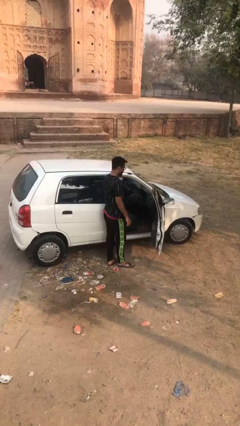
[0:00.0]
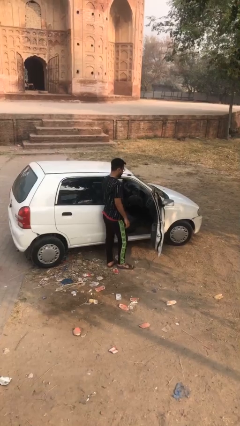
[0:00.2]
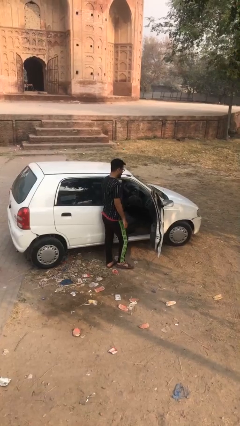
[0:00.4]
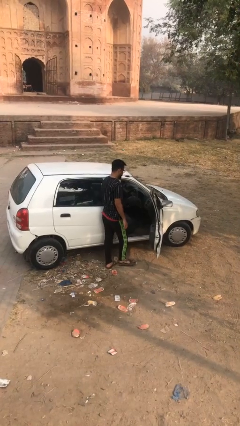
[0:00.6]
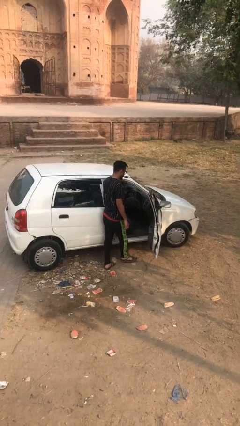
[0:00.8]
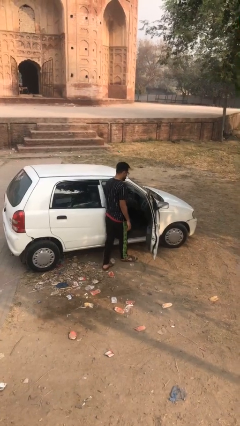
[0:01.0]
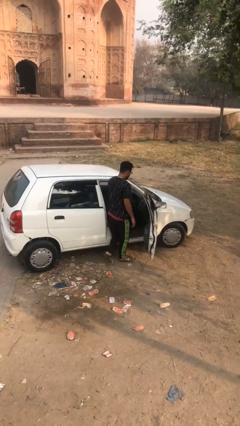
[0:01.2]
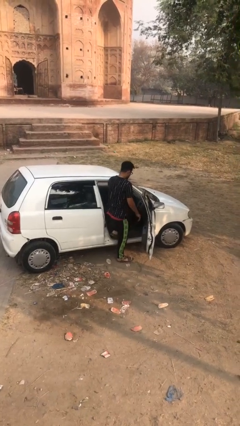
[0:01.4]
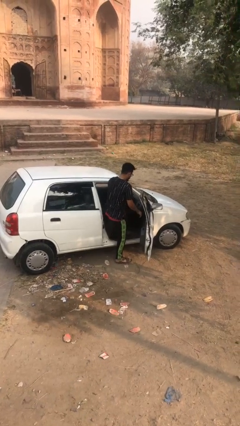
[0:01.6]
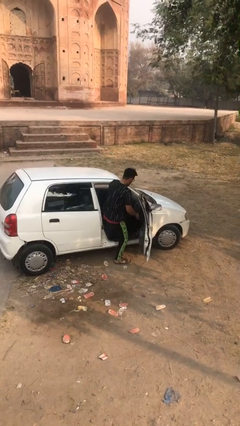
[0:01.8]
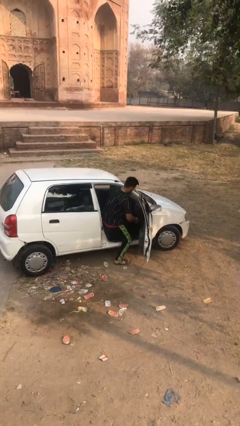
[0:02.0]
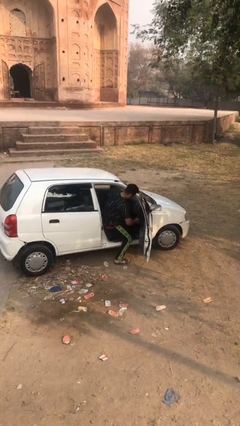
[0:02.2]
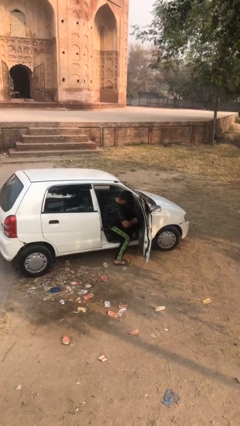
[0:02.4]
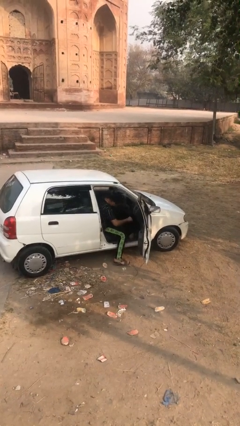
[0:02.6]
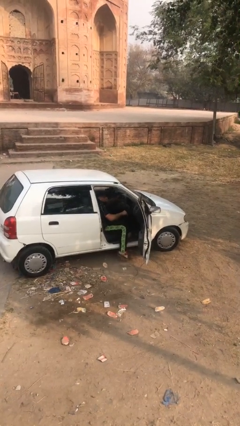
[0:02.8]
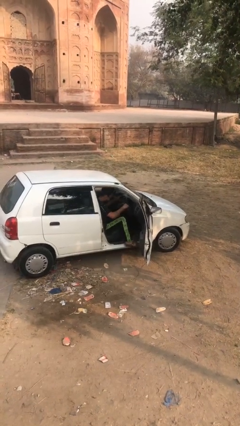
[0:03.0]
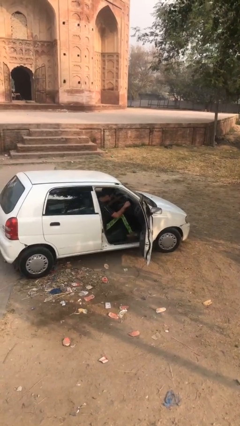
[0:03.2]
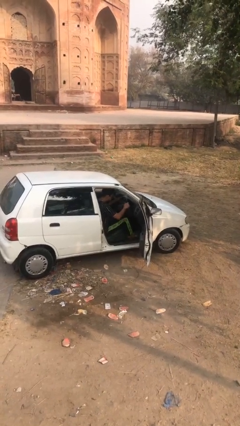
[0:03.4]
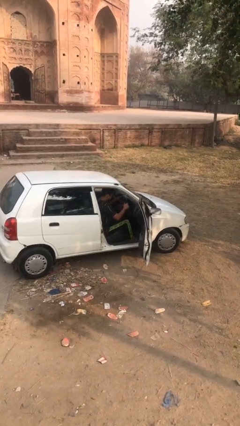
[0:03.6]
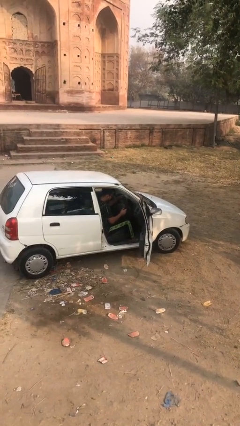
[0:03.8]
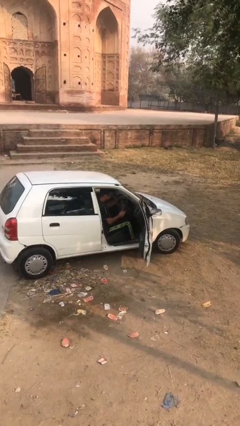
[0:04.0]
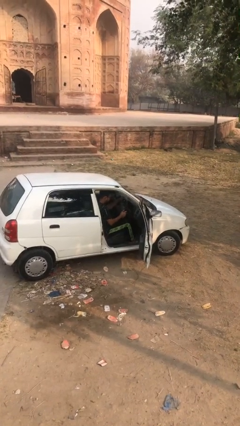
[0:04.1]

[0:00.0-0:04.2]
person enters car

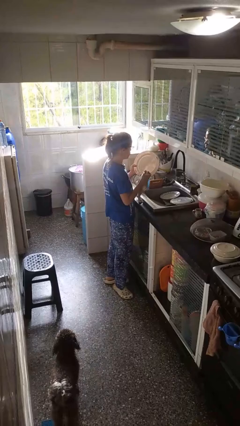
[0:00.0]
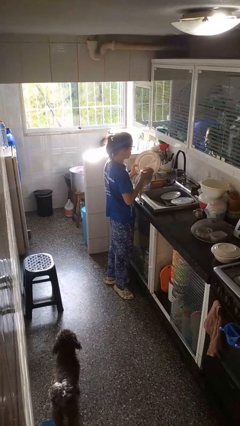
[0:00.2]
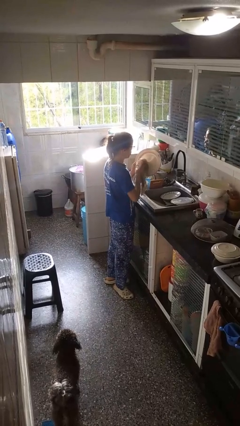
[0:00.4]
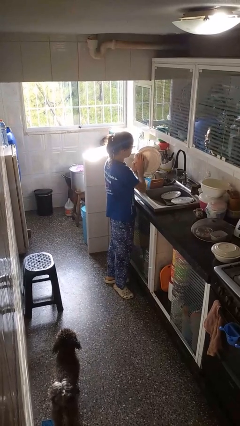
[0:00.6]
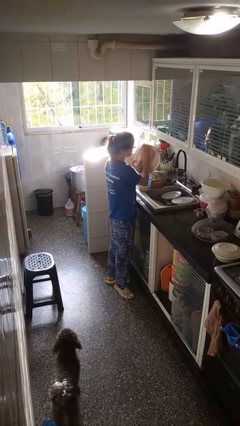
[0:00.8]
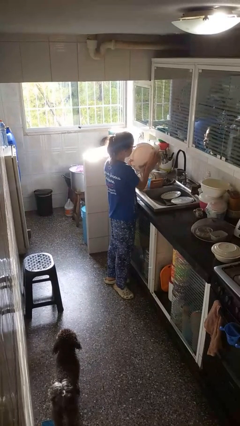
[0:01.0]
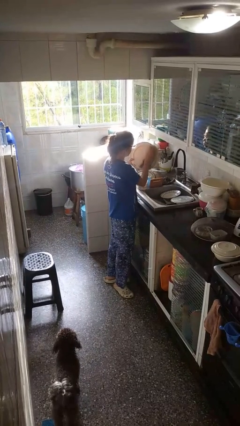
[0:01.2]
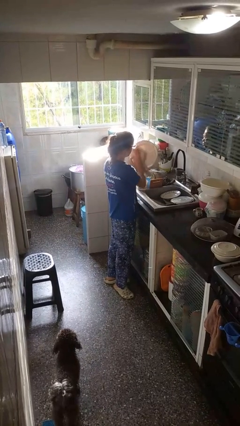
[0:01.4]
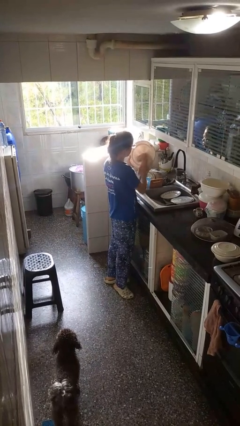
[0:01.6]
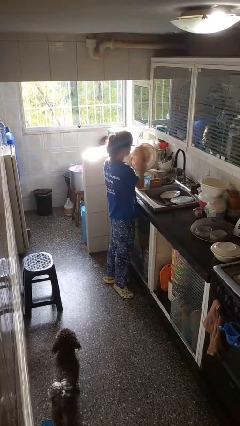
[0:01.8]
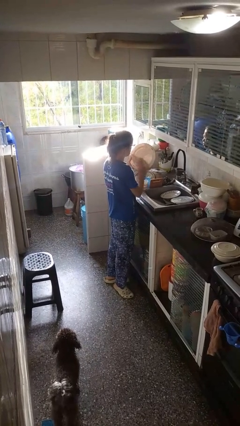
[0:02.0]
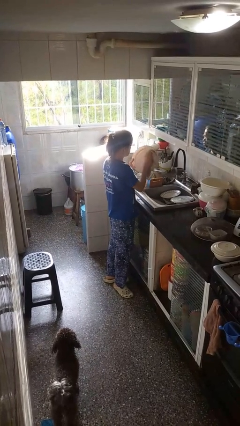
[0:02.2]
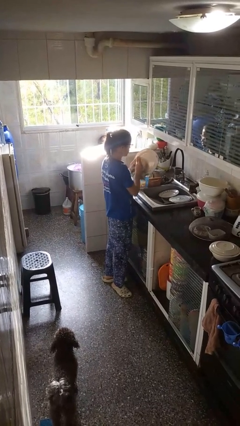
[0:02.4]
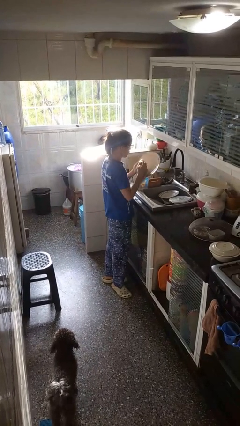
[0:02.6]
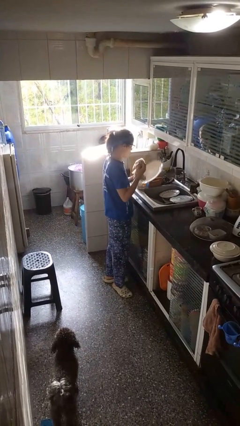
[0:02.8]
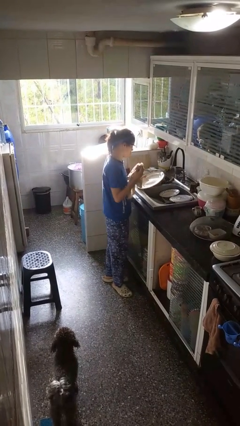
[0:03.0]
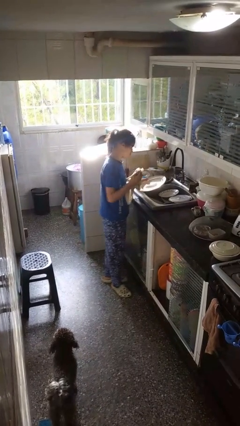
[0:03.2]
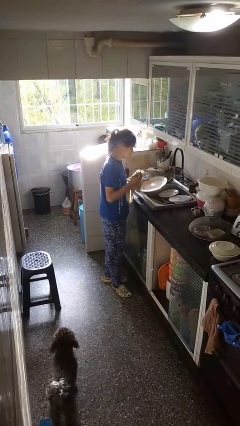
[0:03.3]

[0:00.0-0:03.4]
person dries dish

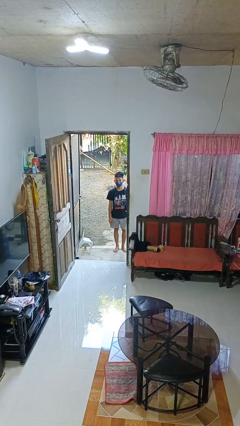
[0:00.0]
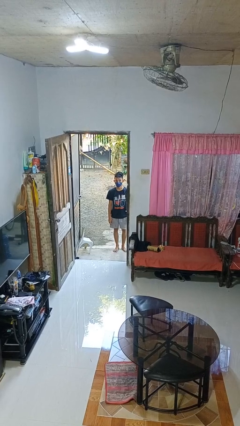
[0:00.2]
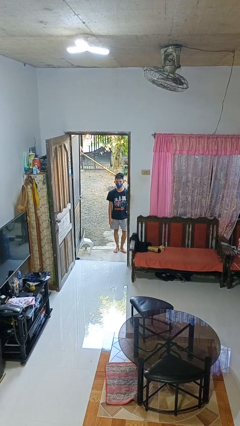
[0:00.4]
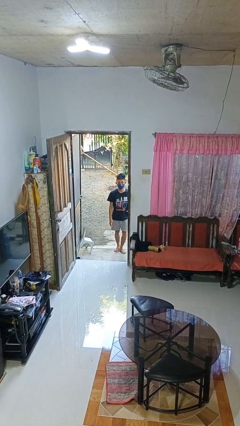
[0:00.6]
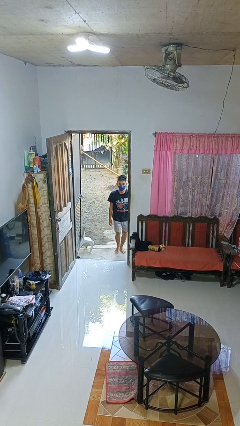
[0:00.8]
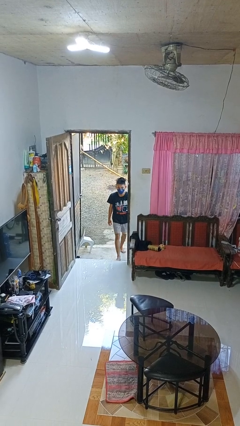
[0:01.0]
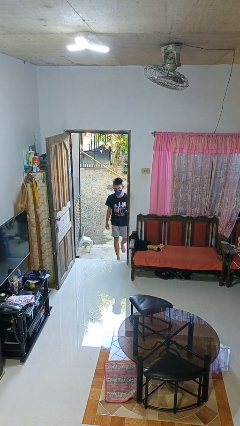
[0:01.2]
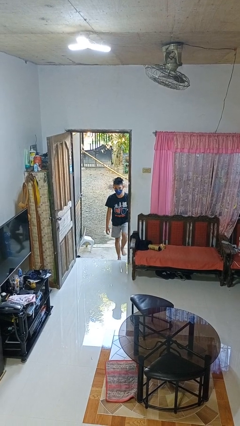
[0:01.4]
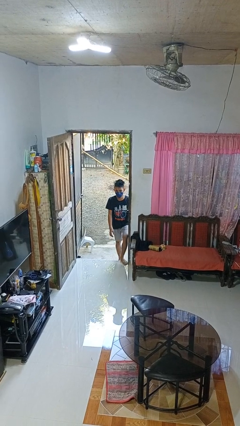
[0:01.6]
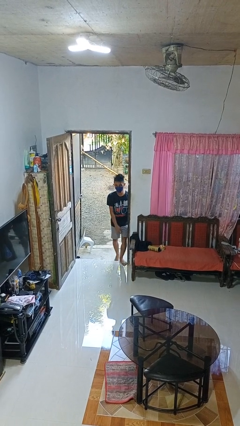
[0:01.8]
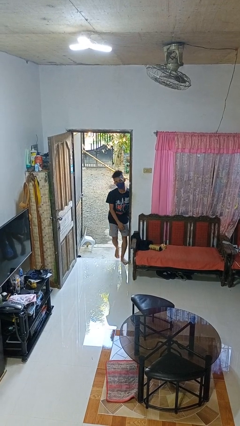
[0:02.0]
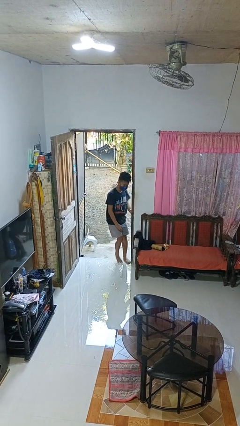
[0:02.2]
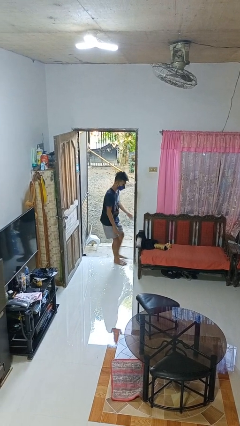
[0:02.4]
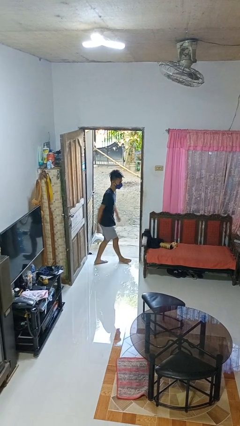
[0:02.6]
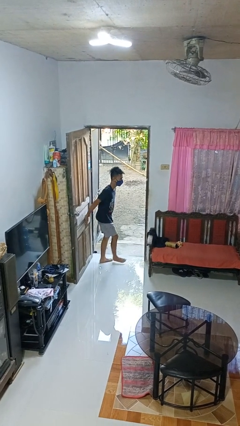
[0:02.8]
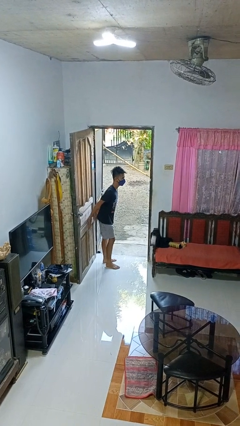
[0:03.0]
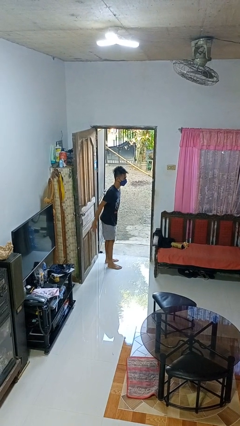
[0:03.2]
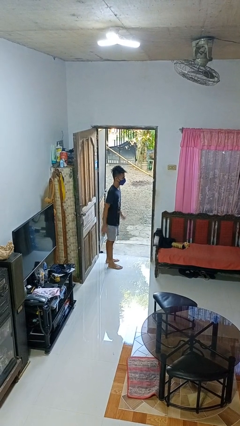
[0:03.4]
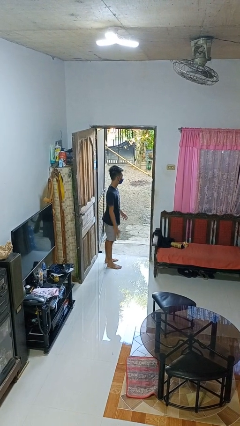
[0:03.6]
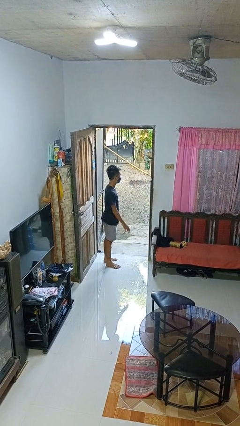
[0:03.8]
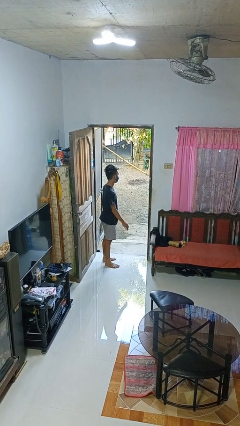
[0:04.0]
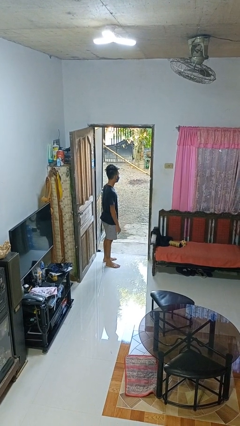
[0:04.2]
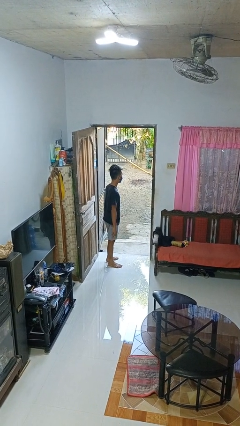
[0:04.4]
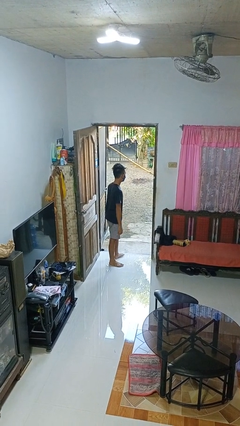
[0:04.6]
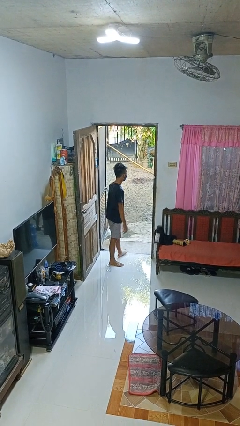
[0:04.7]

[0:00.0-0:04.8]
person bumps into wall

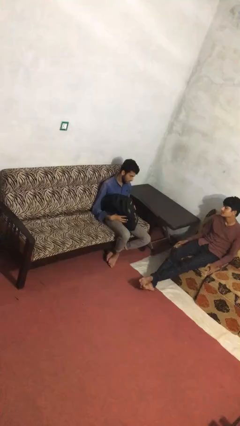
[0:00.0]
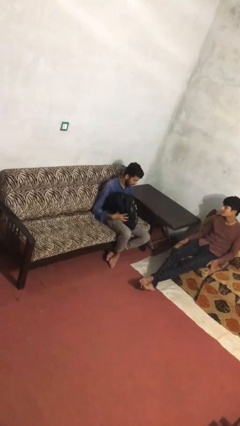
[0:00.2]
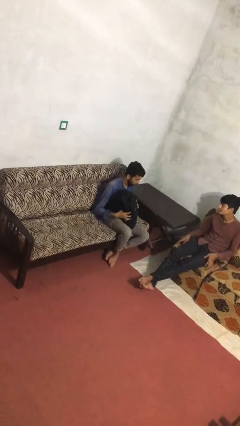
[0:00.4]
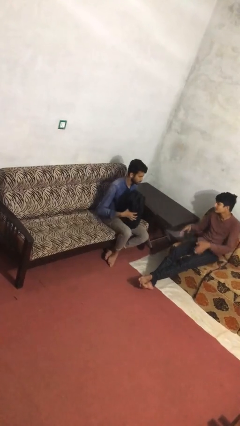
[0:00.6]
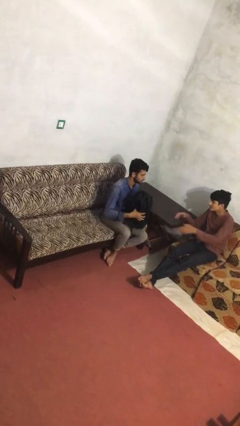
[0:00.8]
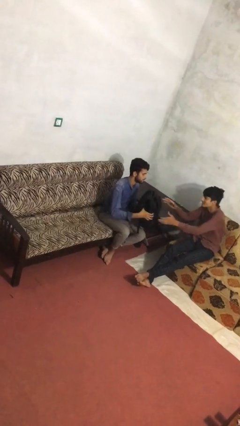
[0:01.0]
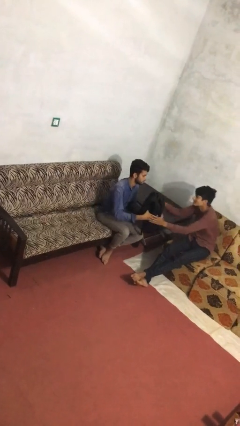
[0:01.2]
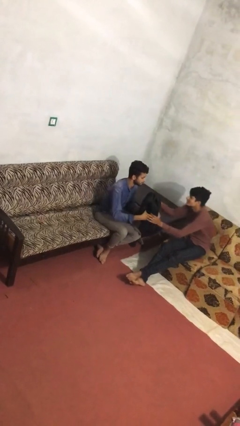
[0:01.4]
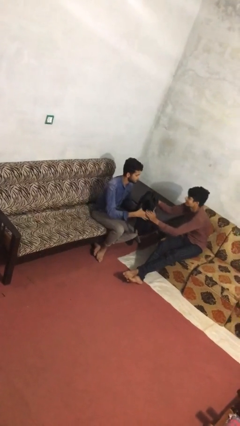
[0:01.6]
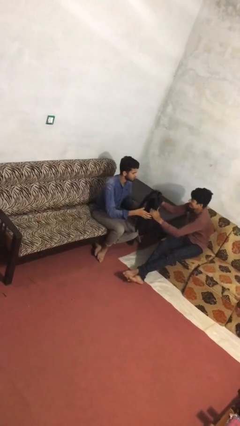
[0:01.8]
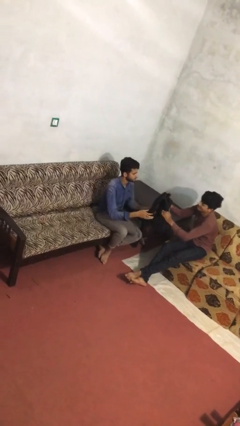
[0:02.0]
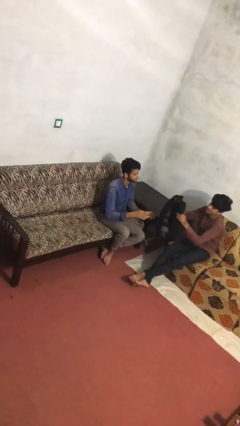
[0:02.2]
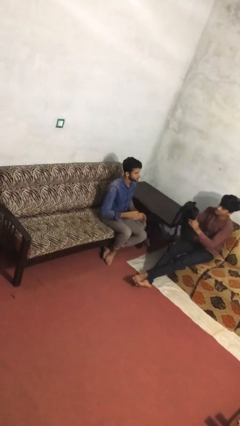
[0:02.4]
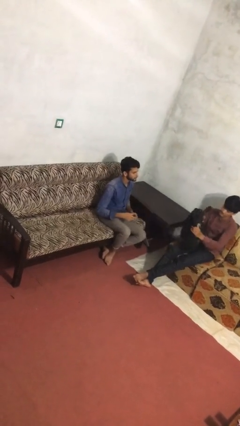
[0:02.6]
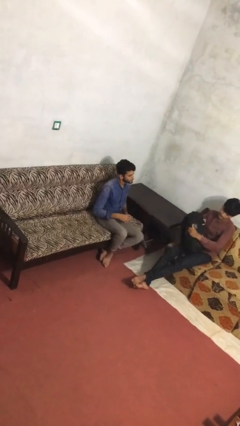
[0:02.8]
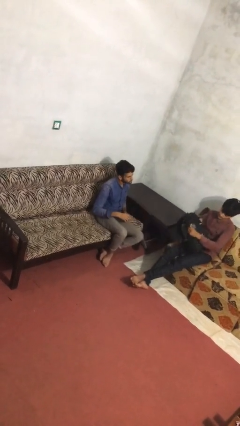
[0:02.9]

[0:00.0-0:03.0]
person transfers object to person

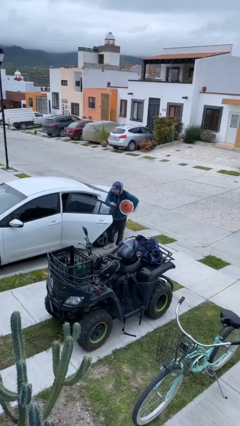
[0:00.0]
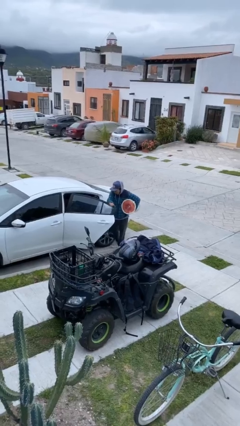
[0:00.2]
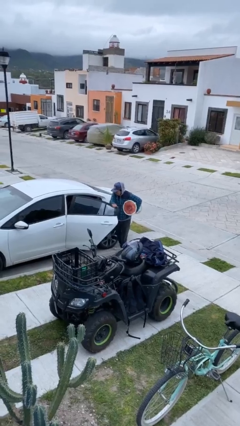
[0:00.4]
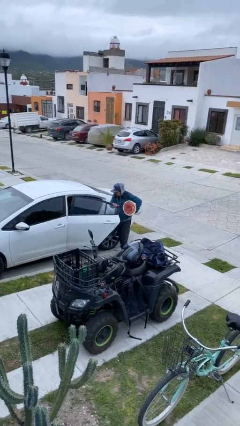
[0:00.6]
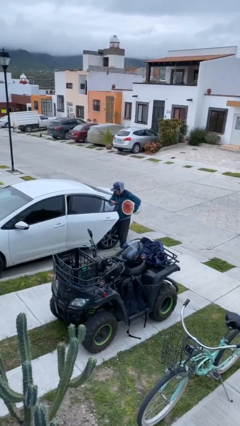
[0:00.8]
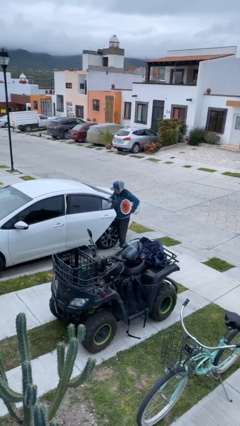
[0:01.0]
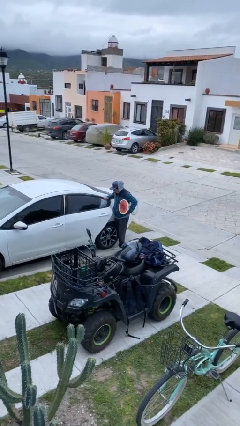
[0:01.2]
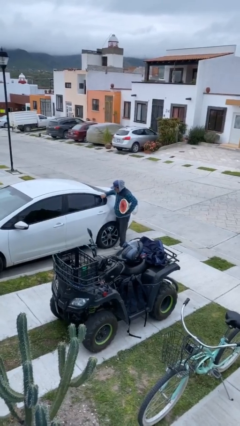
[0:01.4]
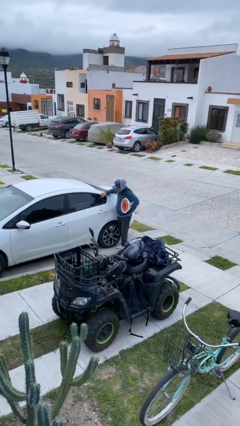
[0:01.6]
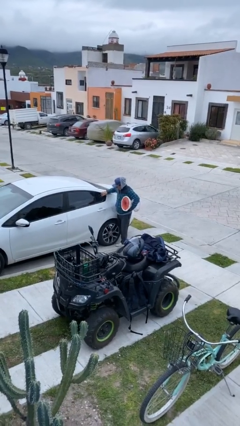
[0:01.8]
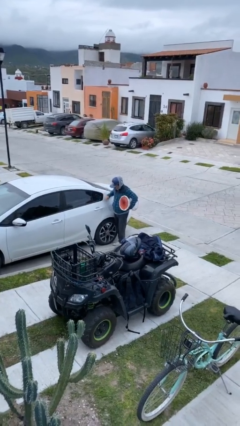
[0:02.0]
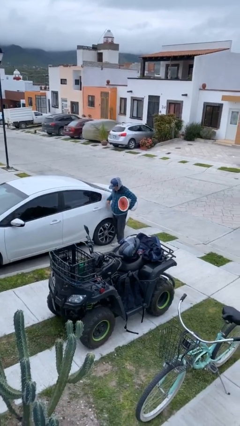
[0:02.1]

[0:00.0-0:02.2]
person closes car door

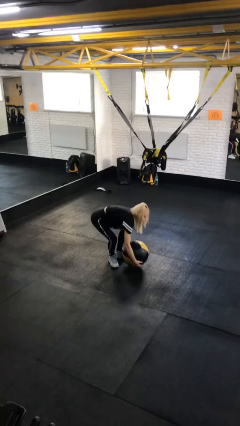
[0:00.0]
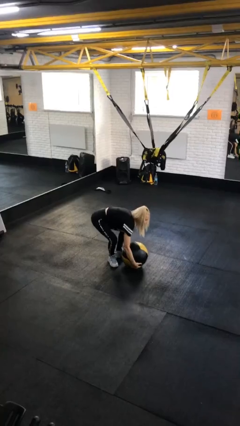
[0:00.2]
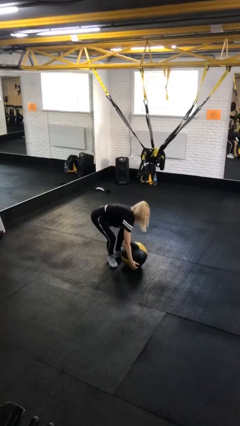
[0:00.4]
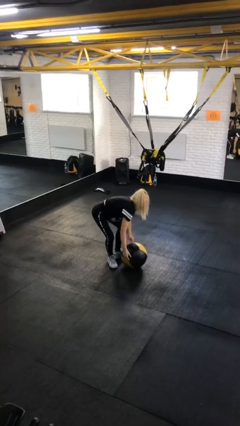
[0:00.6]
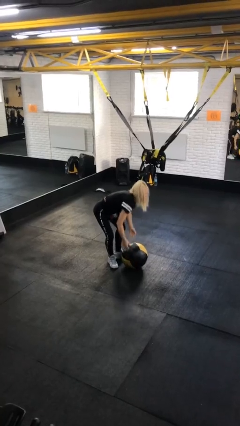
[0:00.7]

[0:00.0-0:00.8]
person puts down object on floor
